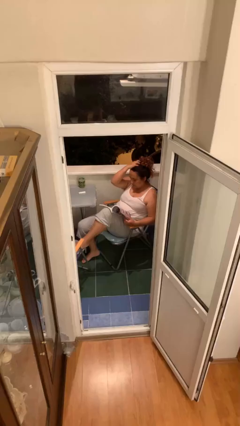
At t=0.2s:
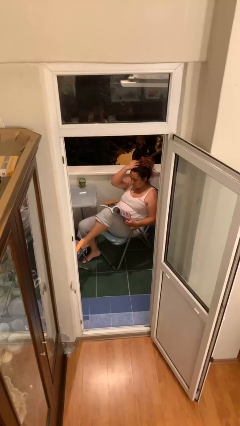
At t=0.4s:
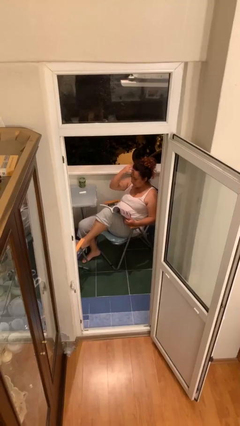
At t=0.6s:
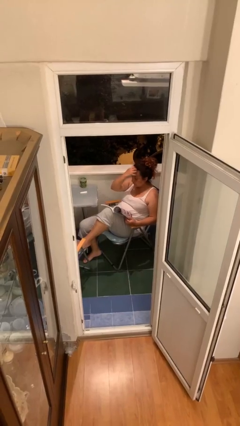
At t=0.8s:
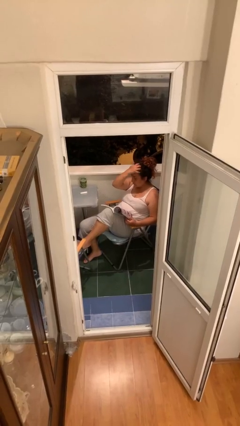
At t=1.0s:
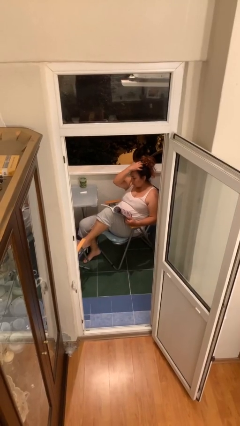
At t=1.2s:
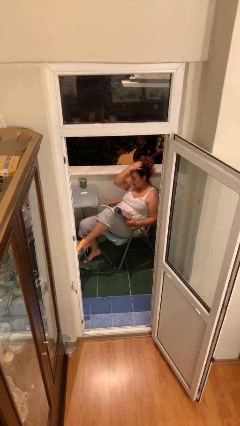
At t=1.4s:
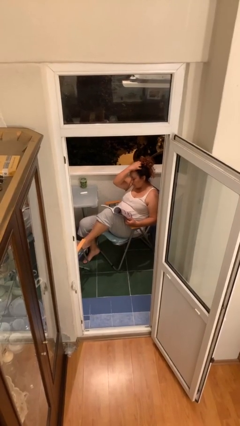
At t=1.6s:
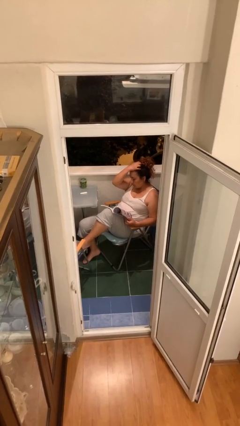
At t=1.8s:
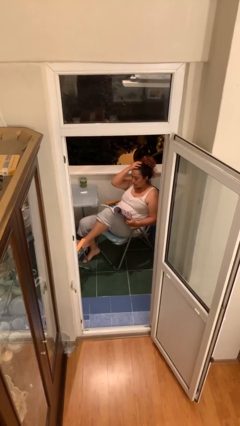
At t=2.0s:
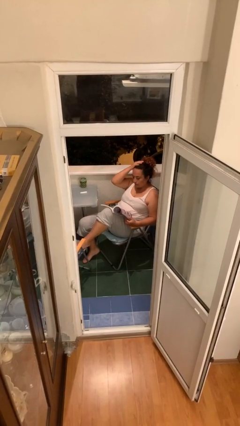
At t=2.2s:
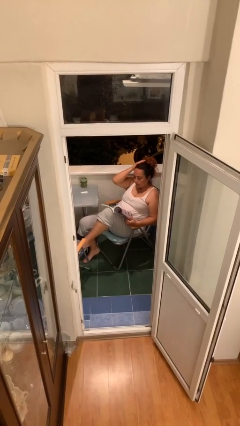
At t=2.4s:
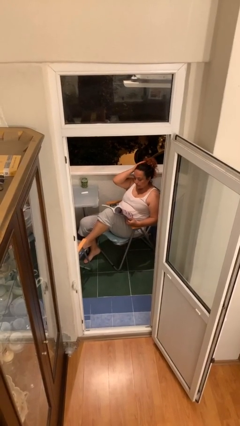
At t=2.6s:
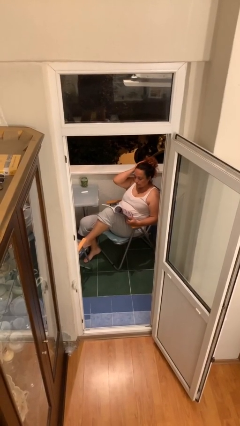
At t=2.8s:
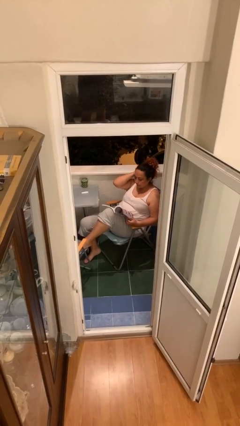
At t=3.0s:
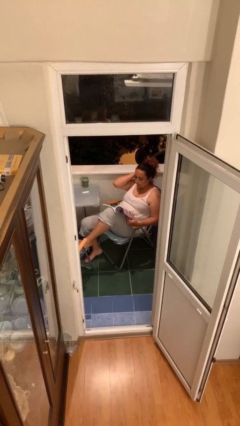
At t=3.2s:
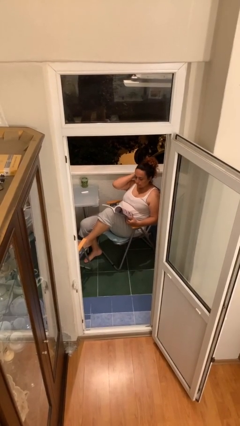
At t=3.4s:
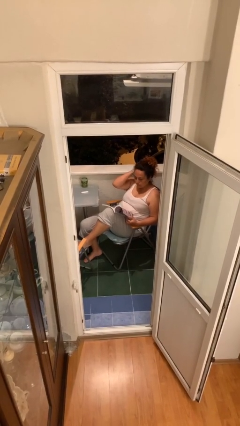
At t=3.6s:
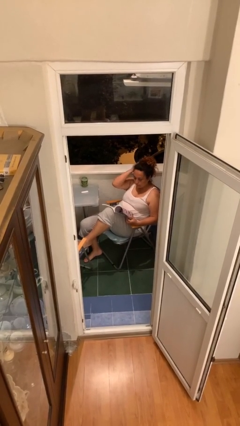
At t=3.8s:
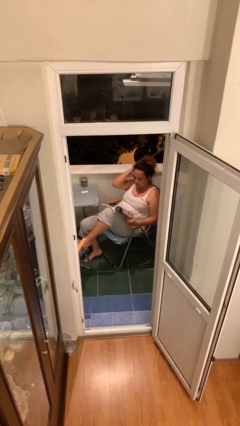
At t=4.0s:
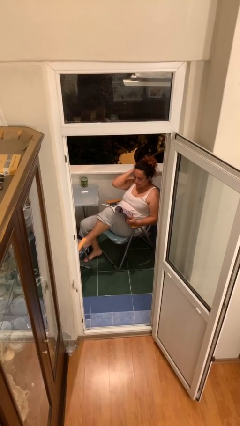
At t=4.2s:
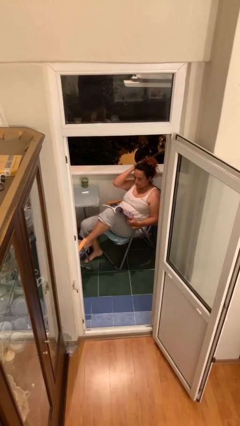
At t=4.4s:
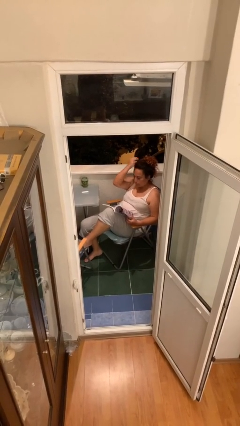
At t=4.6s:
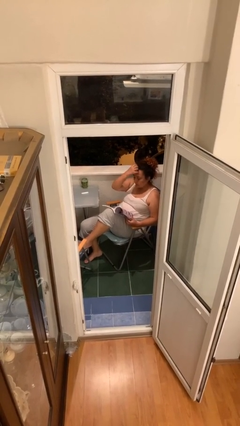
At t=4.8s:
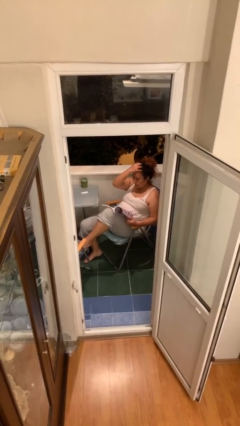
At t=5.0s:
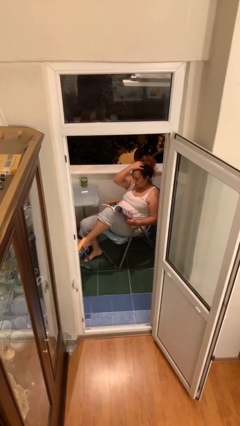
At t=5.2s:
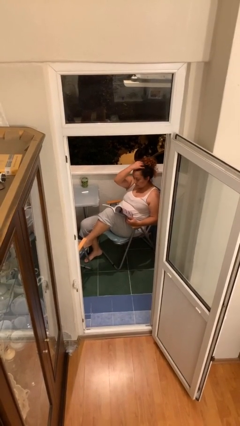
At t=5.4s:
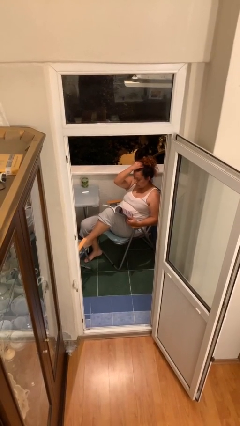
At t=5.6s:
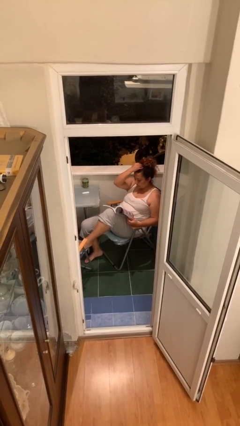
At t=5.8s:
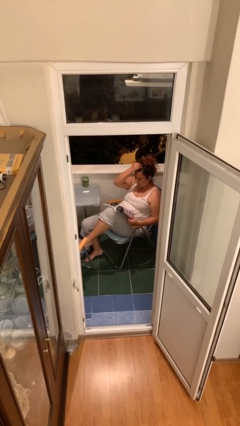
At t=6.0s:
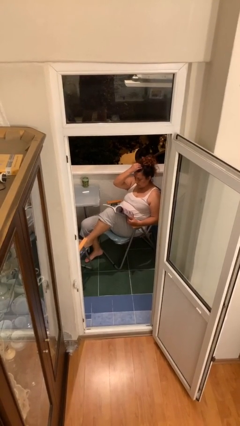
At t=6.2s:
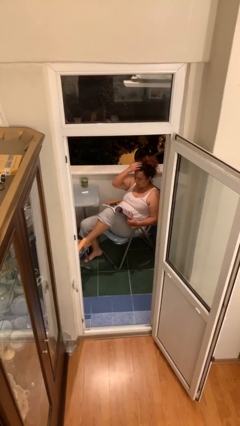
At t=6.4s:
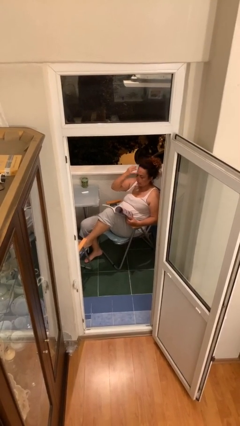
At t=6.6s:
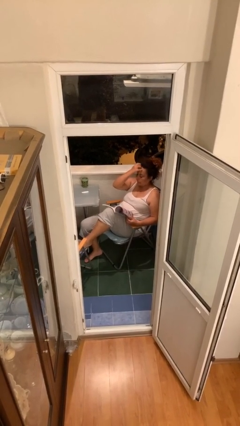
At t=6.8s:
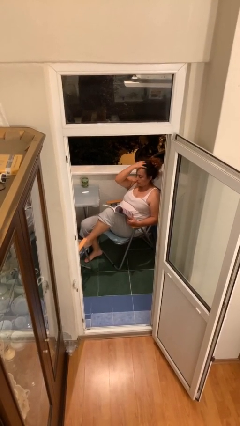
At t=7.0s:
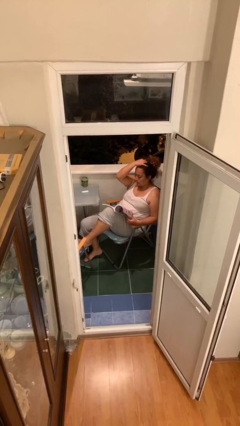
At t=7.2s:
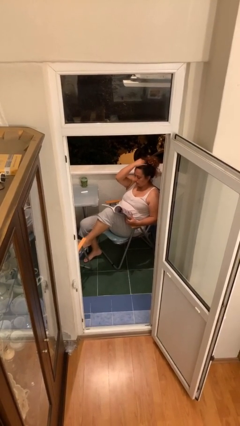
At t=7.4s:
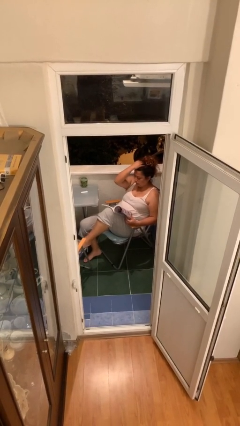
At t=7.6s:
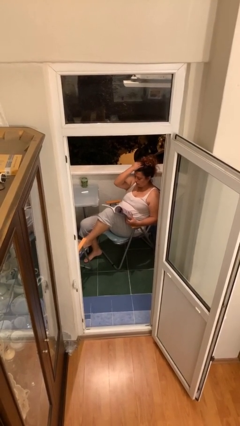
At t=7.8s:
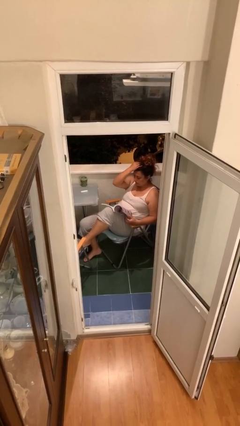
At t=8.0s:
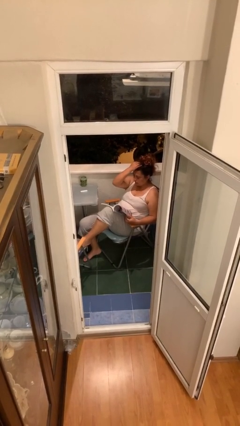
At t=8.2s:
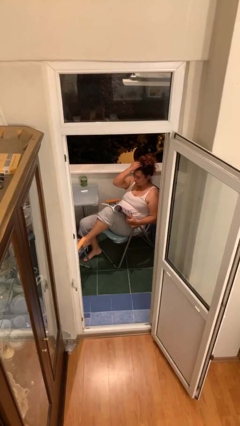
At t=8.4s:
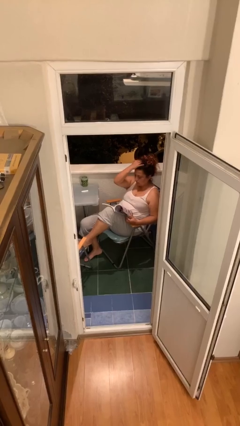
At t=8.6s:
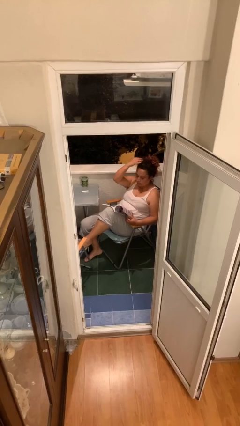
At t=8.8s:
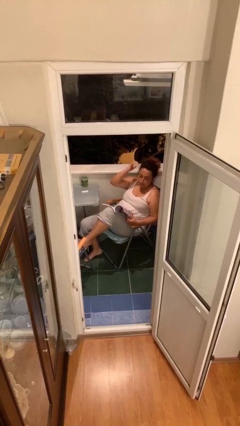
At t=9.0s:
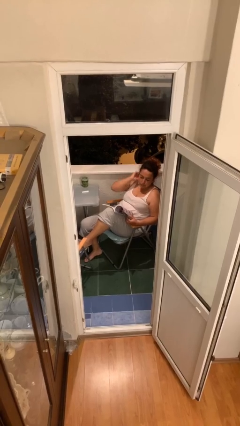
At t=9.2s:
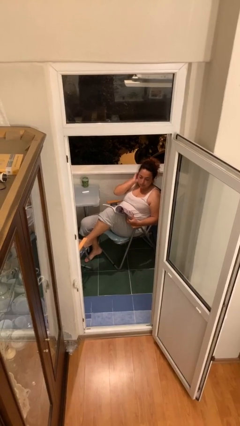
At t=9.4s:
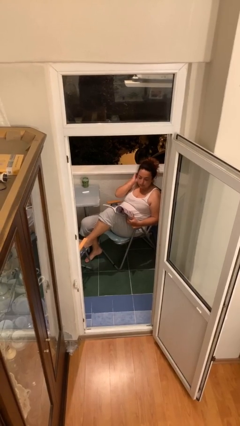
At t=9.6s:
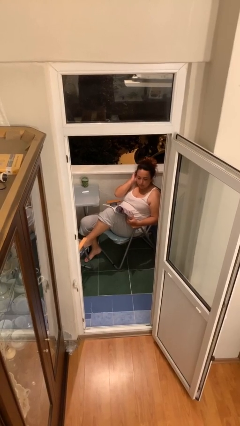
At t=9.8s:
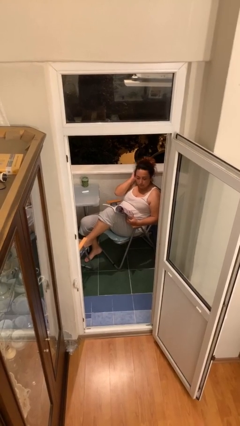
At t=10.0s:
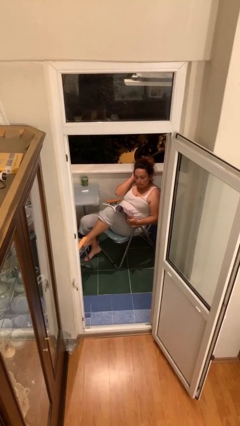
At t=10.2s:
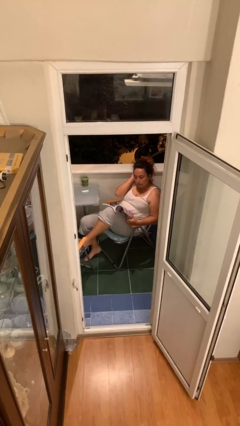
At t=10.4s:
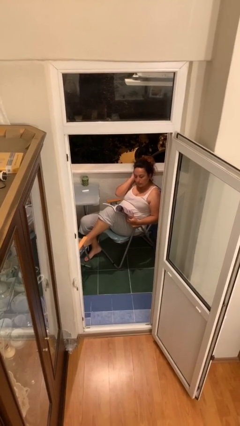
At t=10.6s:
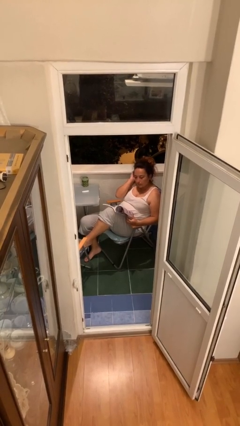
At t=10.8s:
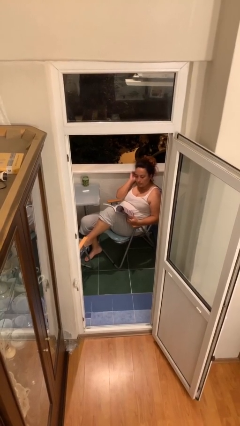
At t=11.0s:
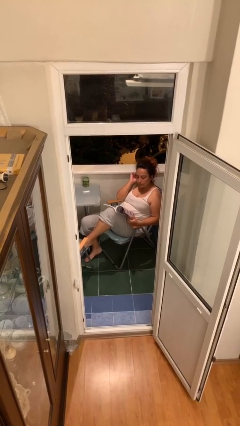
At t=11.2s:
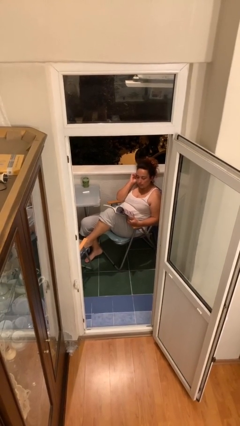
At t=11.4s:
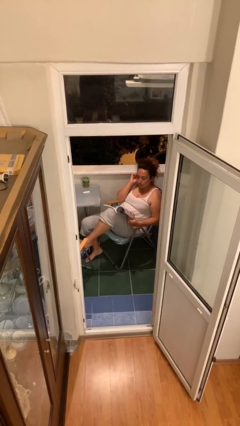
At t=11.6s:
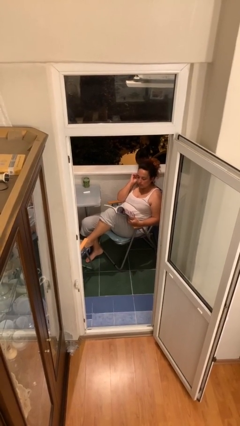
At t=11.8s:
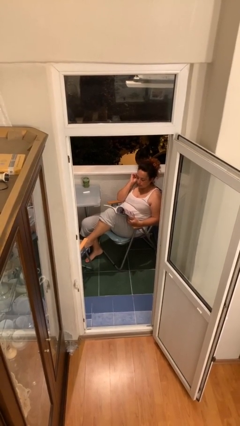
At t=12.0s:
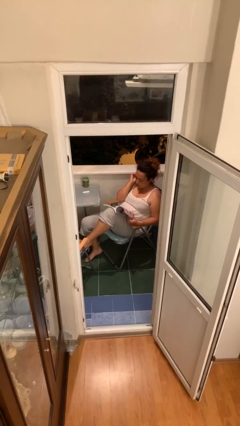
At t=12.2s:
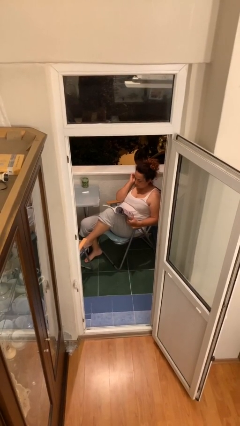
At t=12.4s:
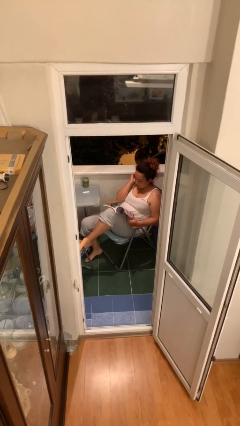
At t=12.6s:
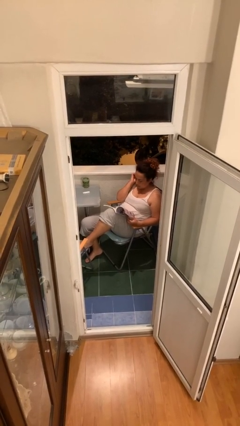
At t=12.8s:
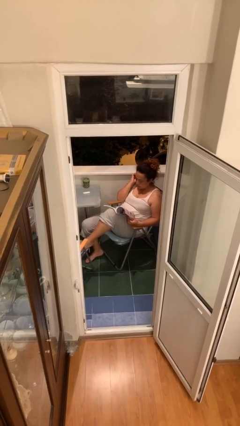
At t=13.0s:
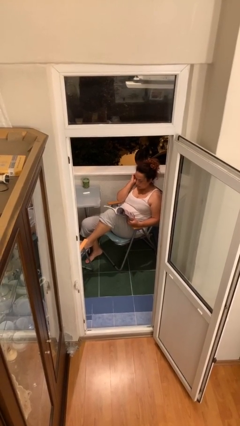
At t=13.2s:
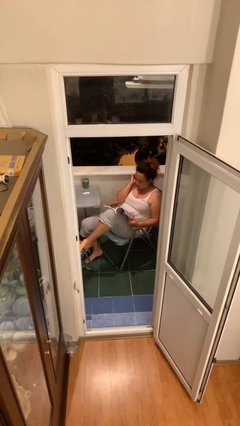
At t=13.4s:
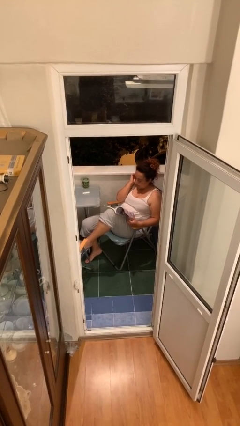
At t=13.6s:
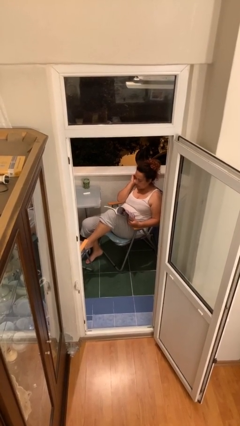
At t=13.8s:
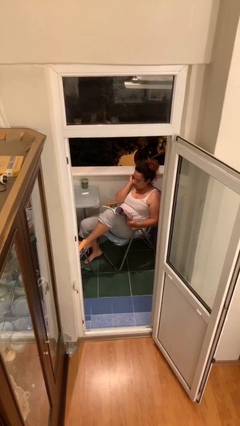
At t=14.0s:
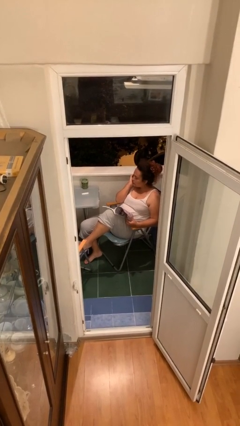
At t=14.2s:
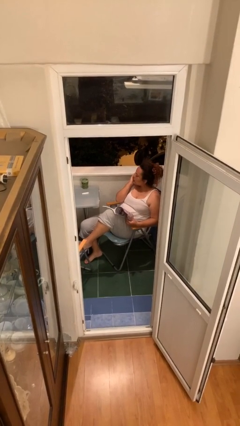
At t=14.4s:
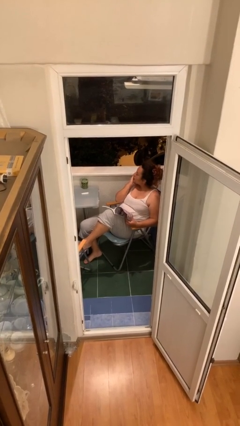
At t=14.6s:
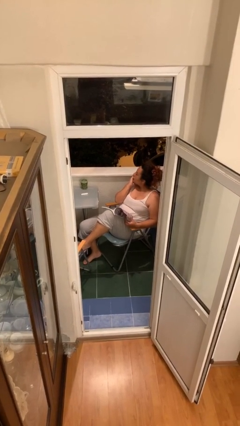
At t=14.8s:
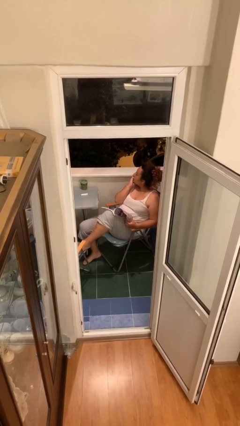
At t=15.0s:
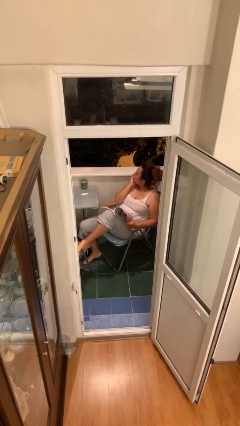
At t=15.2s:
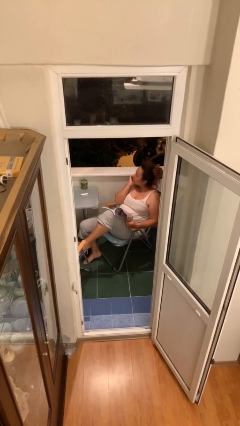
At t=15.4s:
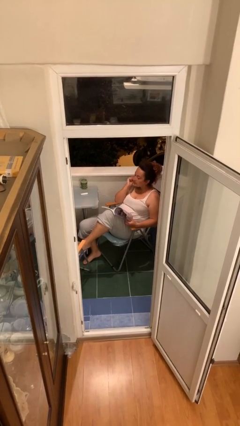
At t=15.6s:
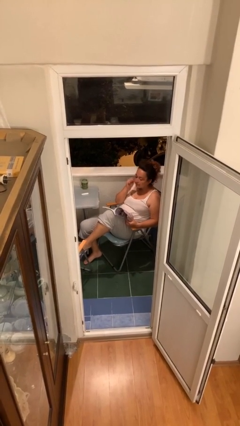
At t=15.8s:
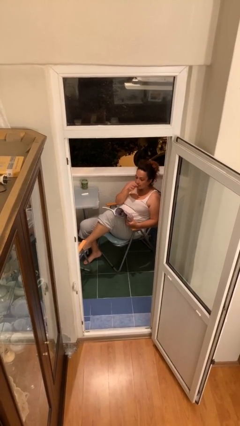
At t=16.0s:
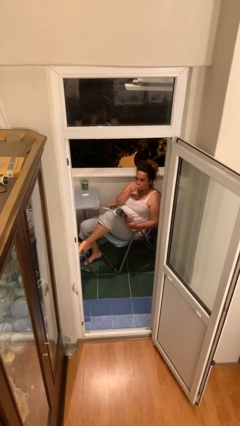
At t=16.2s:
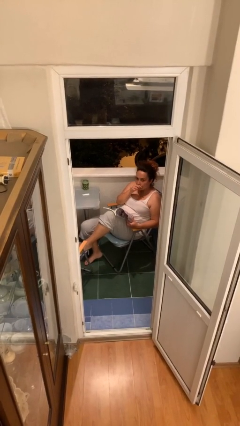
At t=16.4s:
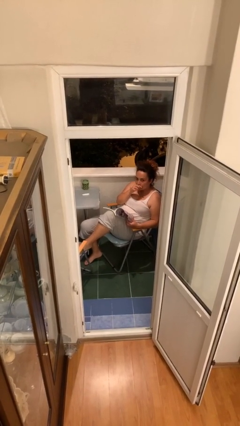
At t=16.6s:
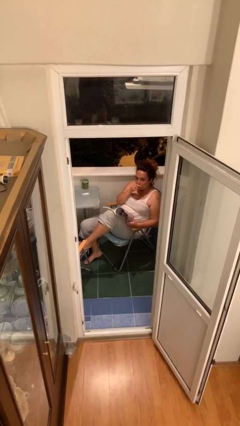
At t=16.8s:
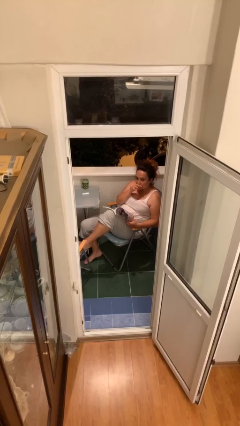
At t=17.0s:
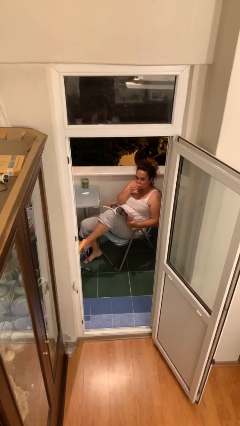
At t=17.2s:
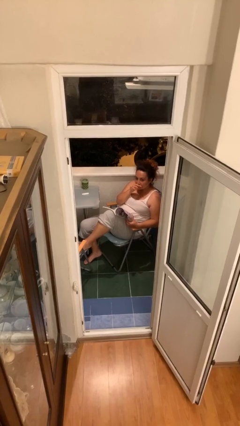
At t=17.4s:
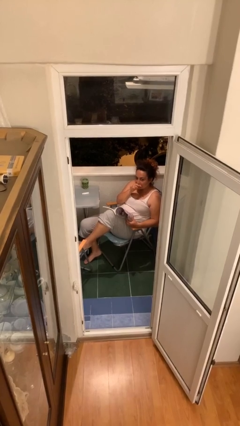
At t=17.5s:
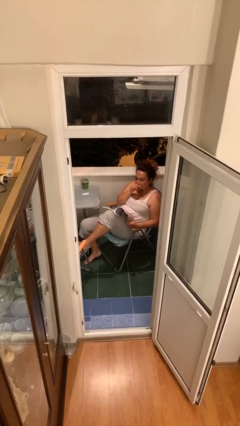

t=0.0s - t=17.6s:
person reads document

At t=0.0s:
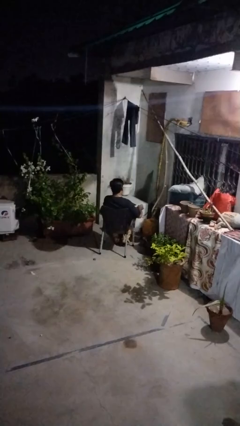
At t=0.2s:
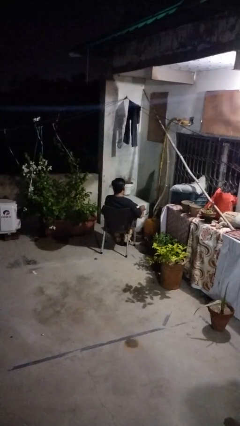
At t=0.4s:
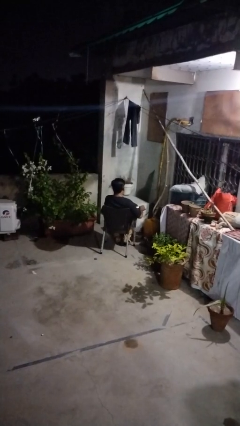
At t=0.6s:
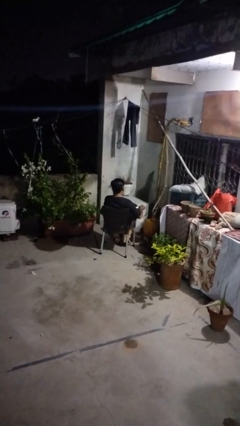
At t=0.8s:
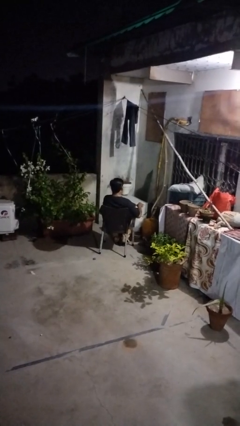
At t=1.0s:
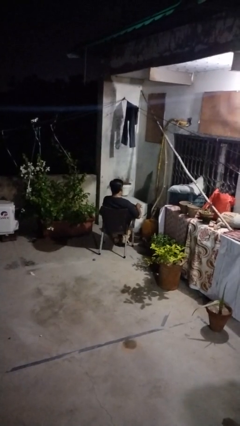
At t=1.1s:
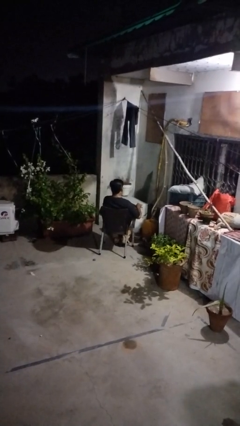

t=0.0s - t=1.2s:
person stirs mug
